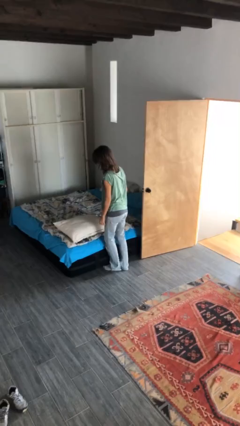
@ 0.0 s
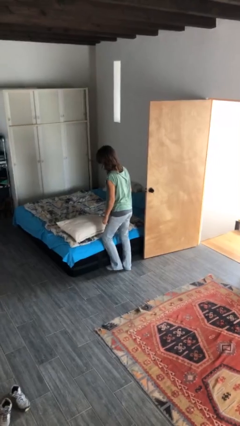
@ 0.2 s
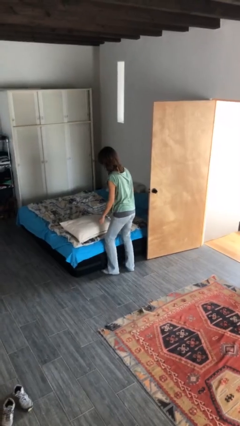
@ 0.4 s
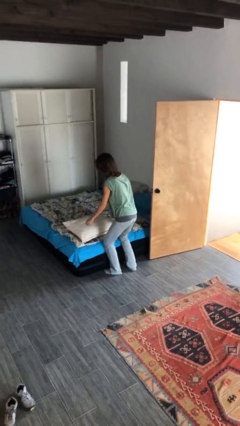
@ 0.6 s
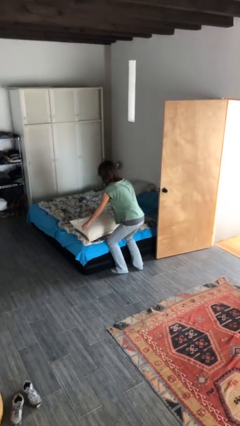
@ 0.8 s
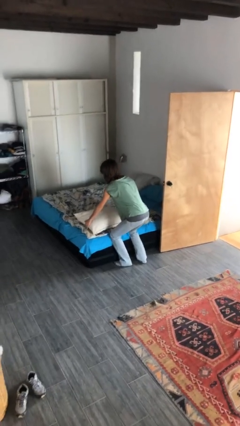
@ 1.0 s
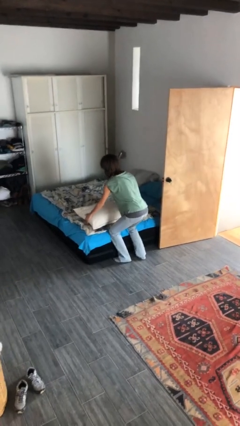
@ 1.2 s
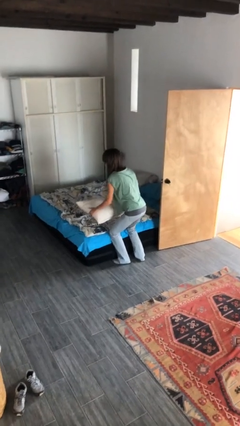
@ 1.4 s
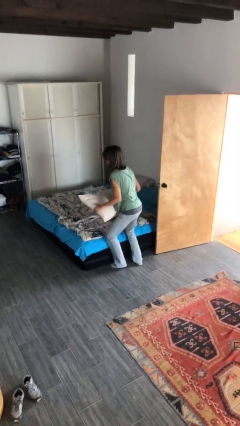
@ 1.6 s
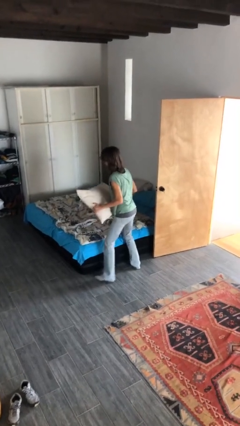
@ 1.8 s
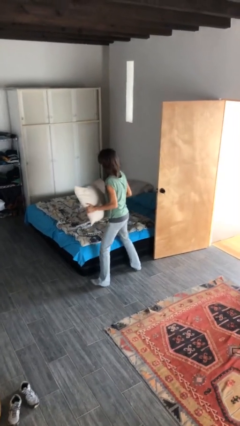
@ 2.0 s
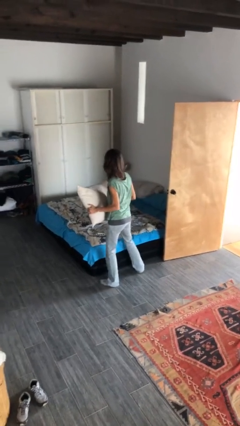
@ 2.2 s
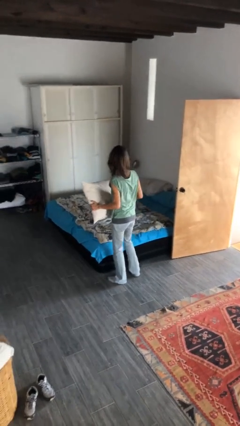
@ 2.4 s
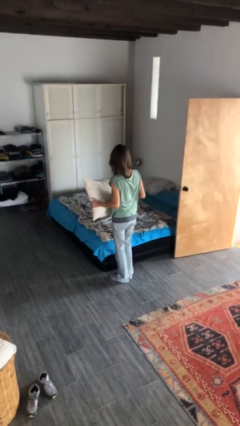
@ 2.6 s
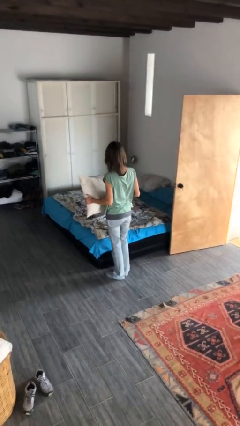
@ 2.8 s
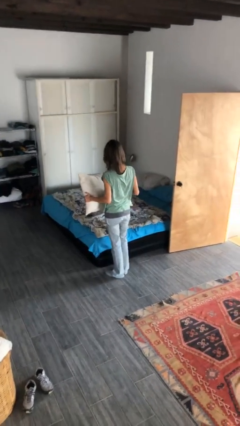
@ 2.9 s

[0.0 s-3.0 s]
person picks up object from bed

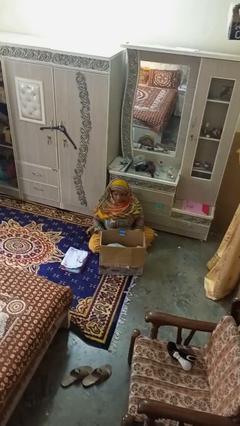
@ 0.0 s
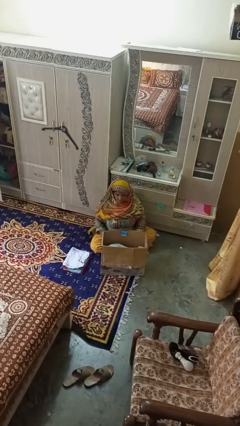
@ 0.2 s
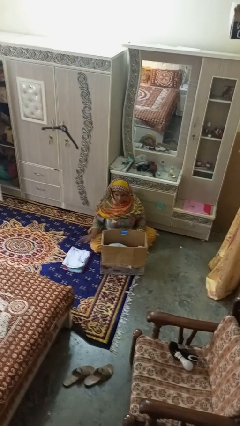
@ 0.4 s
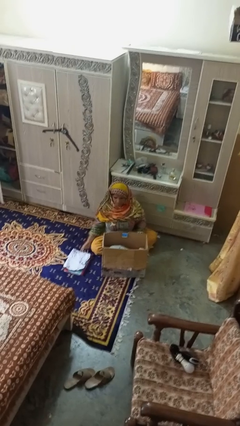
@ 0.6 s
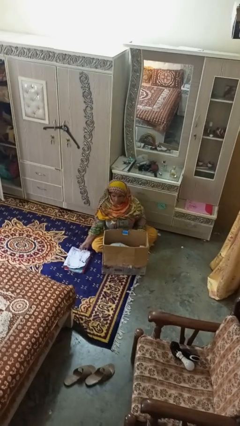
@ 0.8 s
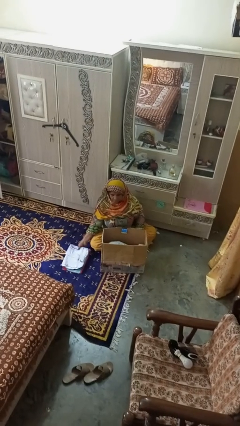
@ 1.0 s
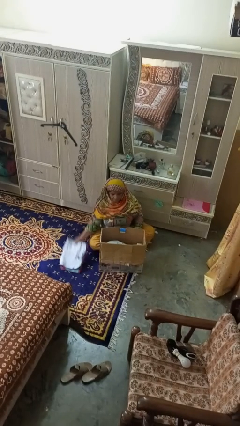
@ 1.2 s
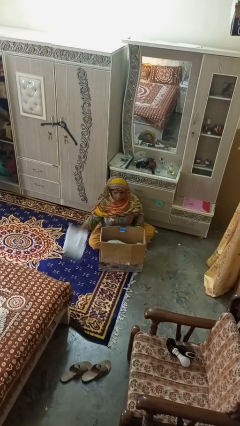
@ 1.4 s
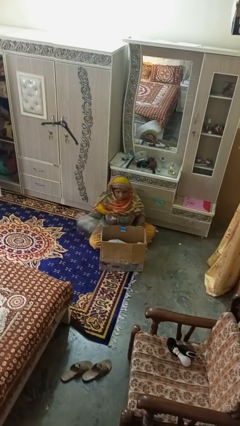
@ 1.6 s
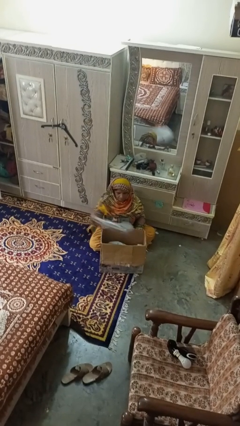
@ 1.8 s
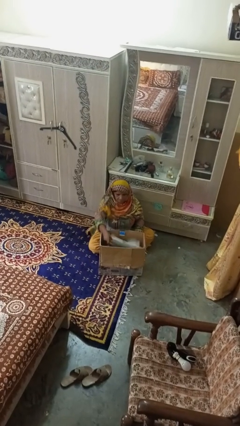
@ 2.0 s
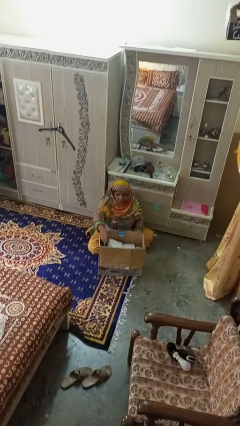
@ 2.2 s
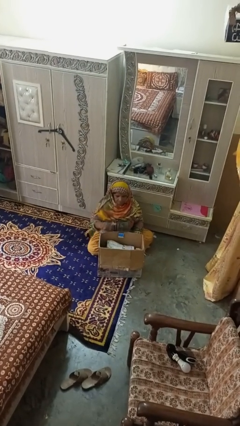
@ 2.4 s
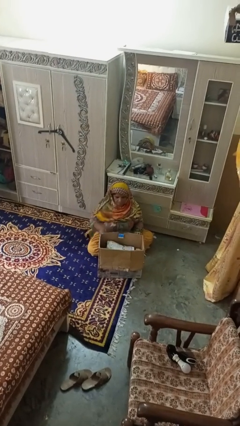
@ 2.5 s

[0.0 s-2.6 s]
person puts object into box

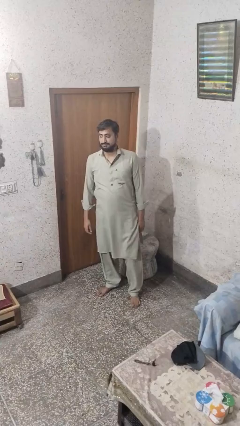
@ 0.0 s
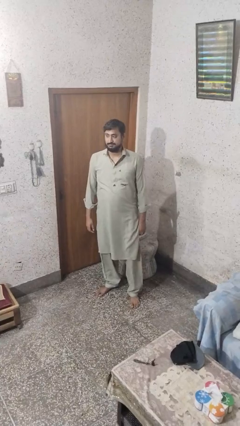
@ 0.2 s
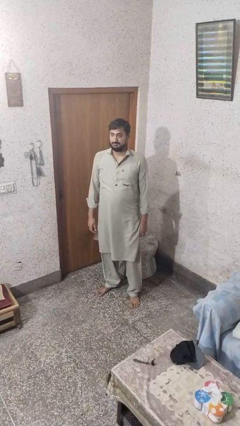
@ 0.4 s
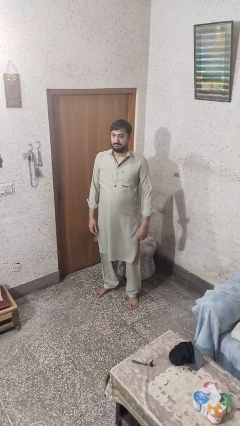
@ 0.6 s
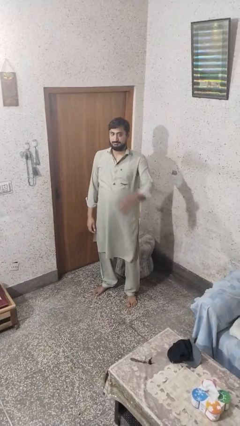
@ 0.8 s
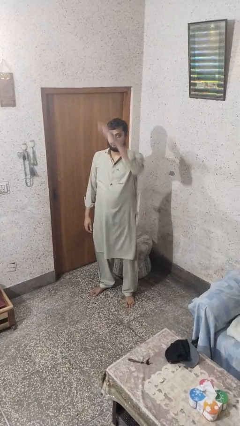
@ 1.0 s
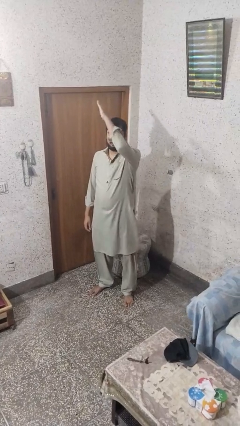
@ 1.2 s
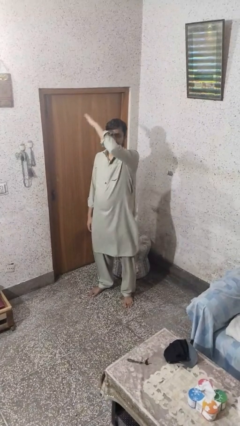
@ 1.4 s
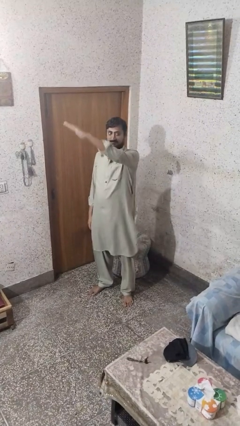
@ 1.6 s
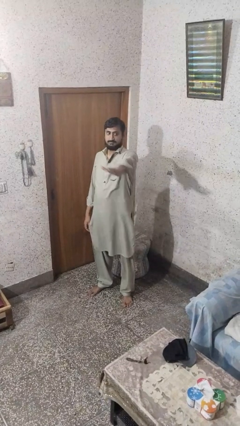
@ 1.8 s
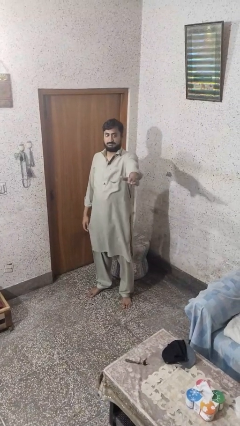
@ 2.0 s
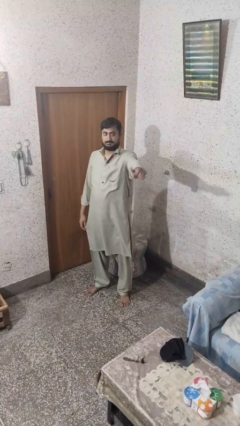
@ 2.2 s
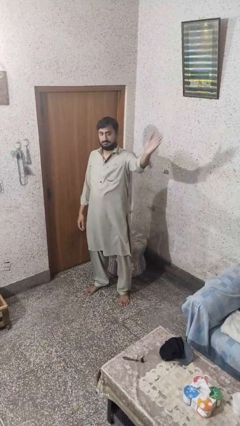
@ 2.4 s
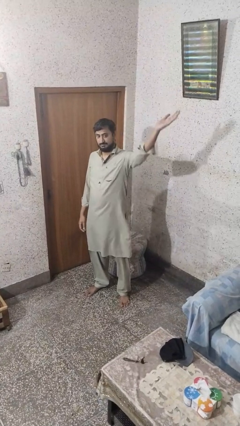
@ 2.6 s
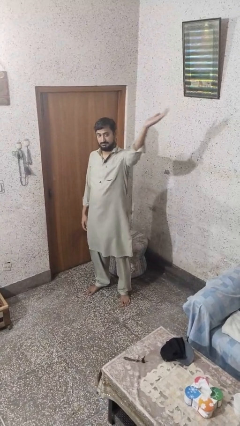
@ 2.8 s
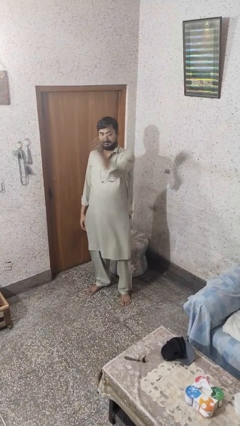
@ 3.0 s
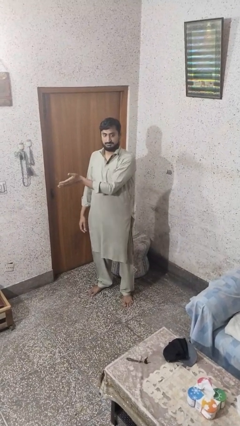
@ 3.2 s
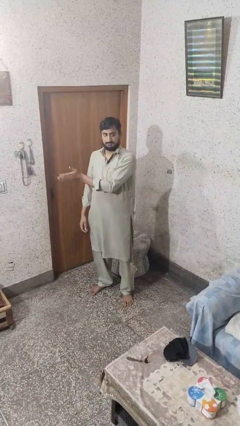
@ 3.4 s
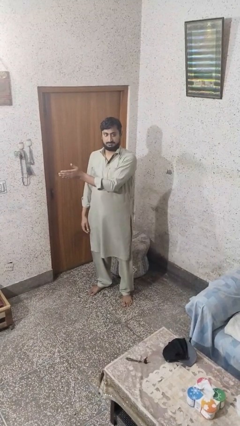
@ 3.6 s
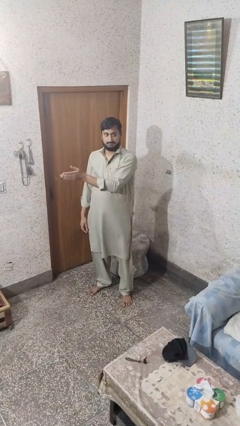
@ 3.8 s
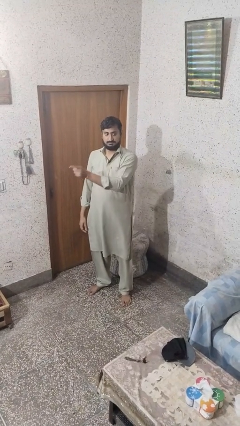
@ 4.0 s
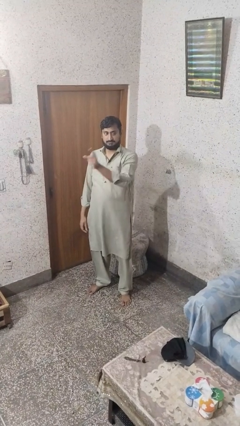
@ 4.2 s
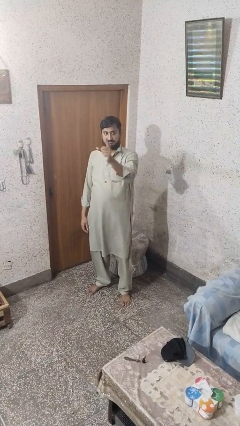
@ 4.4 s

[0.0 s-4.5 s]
person gestures cut

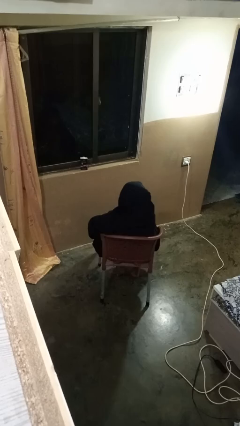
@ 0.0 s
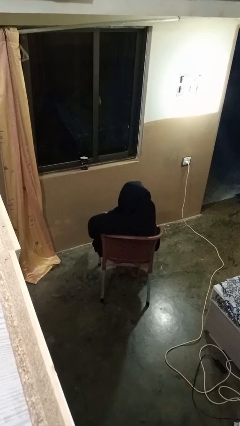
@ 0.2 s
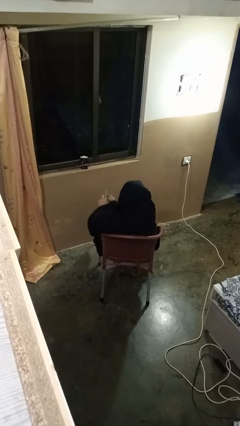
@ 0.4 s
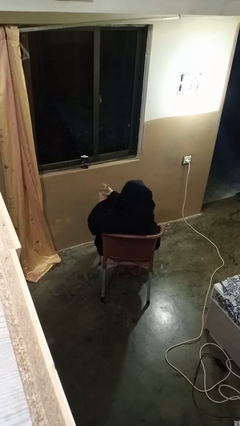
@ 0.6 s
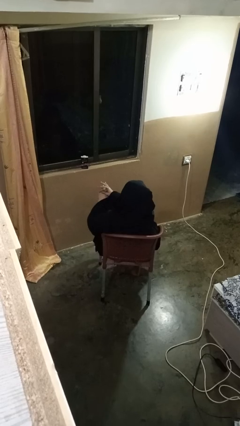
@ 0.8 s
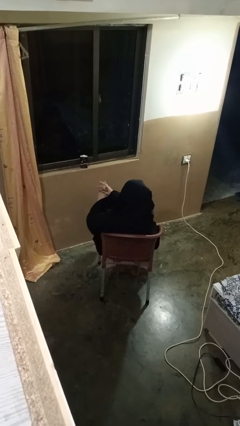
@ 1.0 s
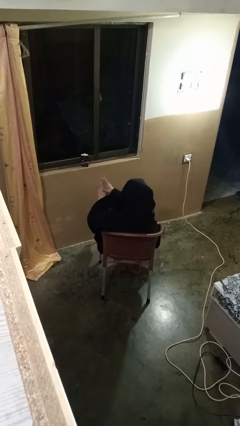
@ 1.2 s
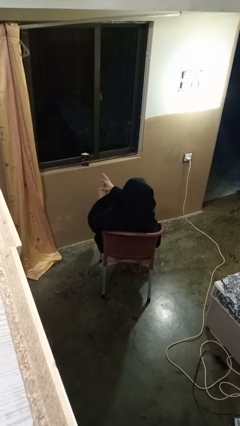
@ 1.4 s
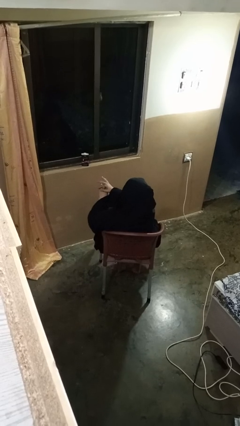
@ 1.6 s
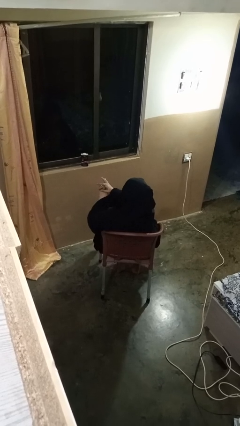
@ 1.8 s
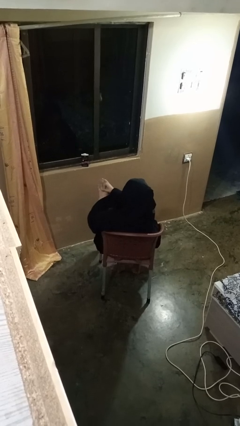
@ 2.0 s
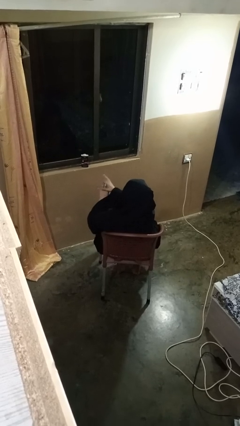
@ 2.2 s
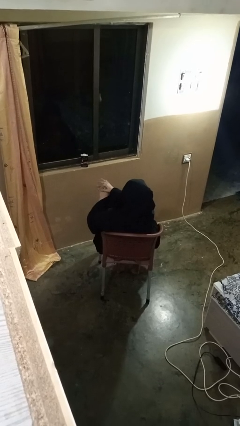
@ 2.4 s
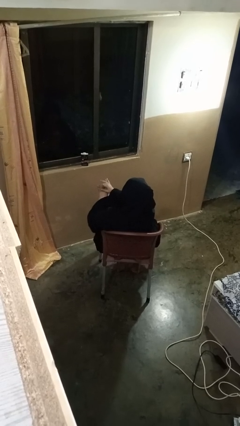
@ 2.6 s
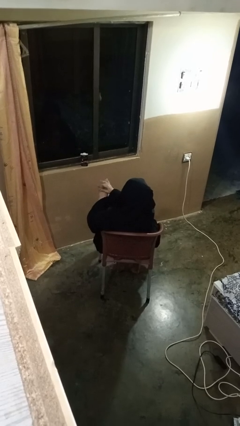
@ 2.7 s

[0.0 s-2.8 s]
person cracks knuckles

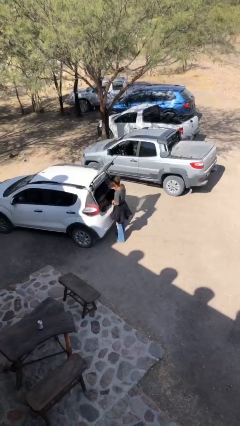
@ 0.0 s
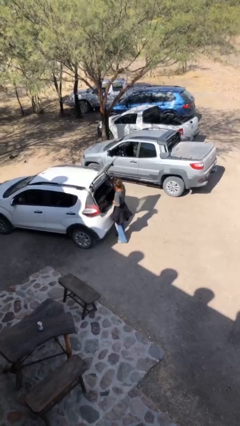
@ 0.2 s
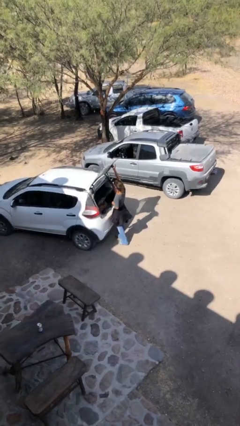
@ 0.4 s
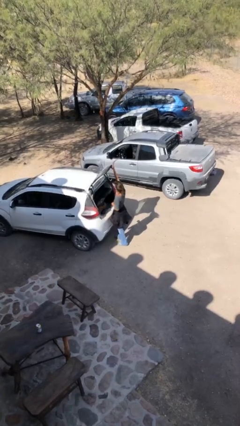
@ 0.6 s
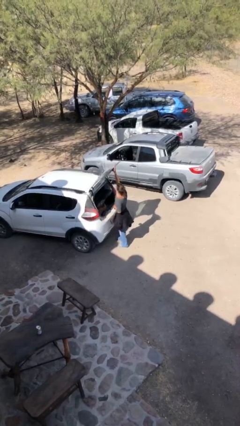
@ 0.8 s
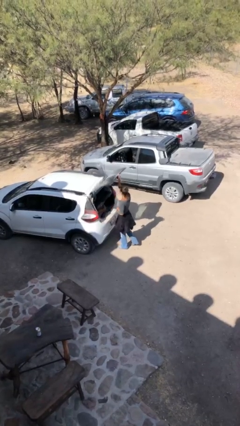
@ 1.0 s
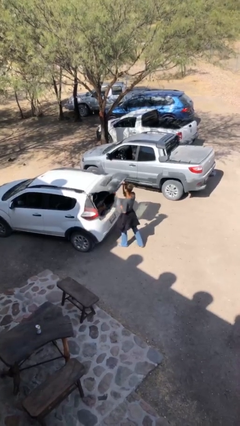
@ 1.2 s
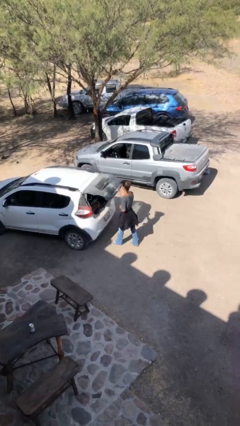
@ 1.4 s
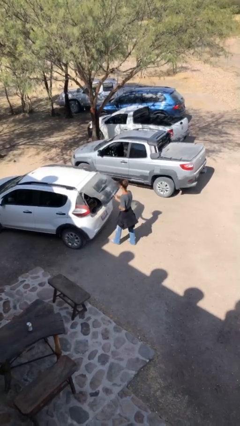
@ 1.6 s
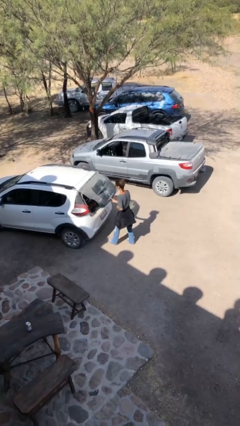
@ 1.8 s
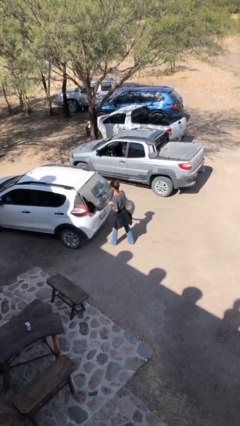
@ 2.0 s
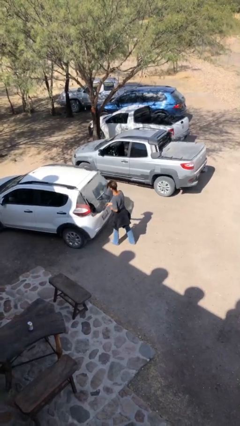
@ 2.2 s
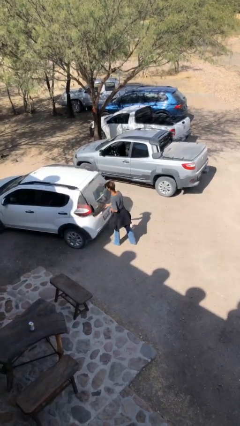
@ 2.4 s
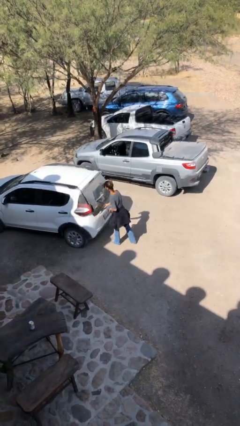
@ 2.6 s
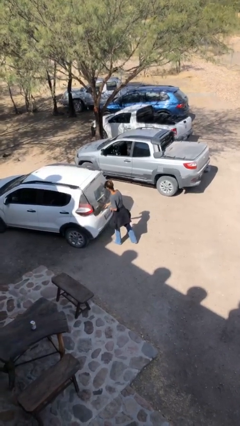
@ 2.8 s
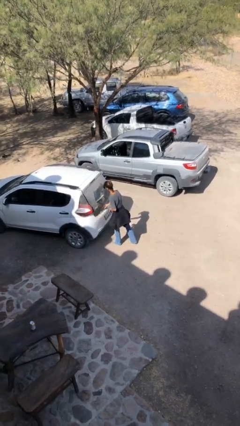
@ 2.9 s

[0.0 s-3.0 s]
person closes car trunk

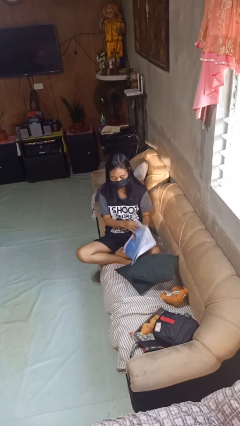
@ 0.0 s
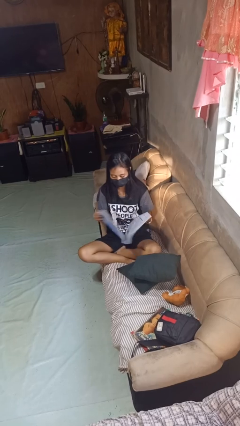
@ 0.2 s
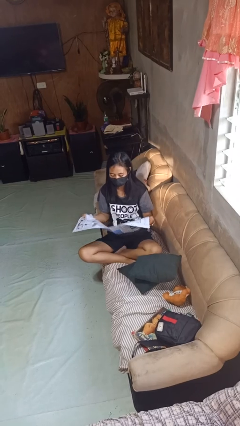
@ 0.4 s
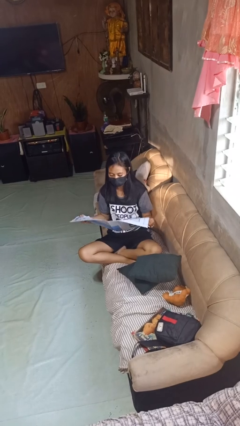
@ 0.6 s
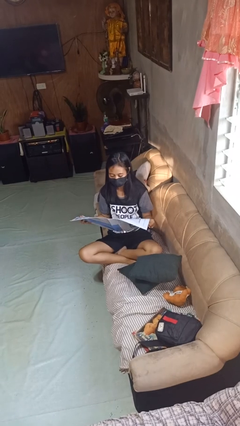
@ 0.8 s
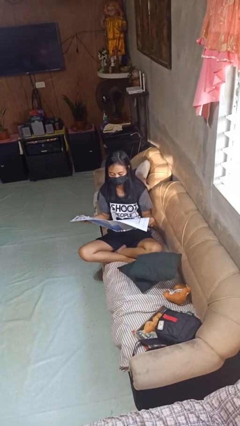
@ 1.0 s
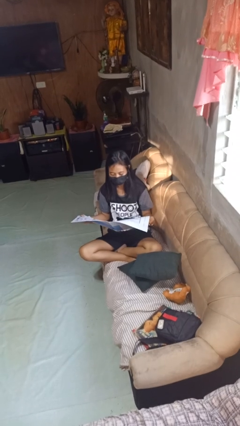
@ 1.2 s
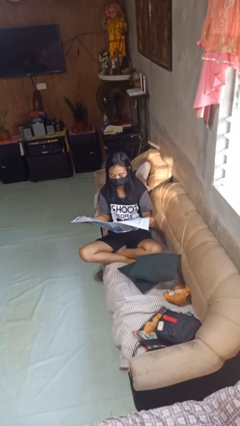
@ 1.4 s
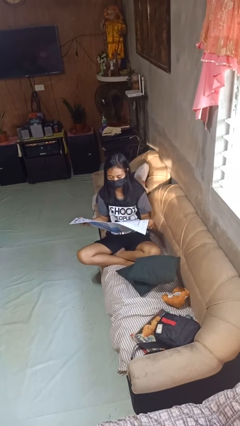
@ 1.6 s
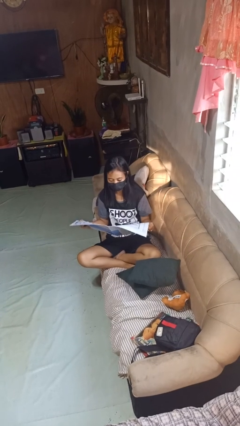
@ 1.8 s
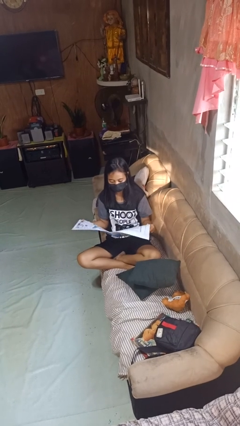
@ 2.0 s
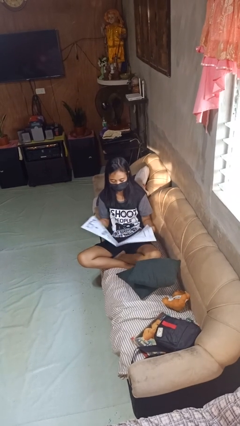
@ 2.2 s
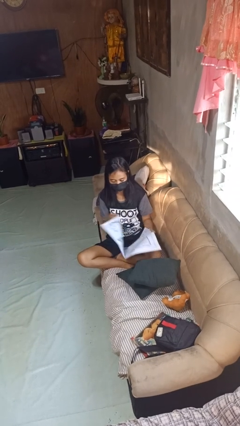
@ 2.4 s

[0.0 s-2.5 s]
person reads newspaper
